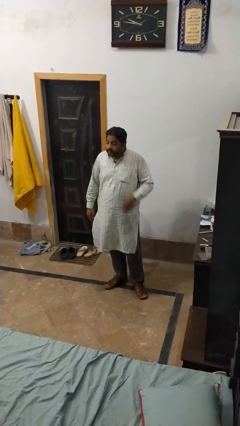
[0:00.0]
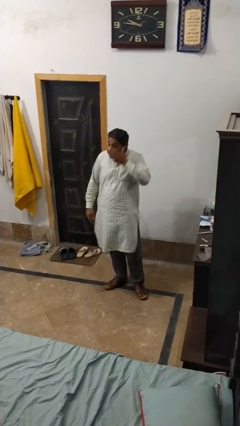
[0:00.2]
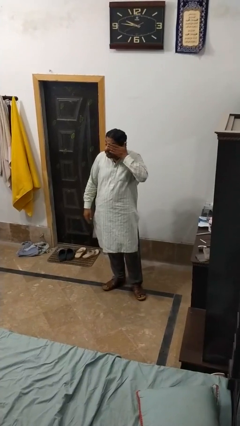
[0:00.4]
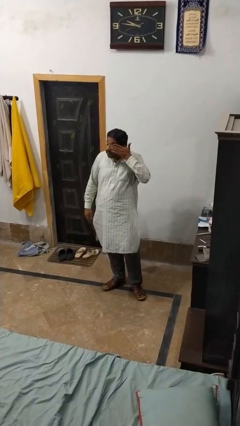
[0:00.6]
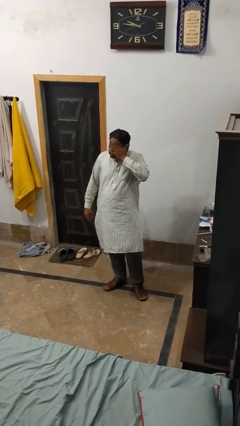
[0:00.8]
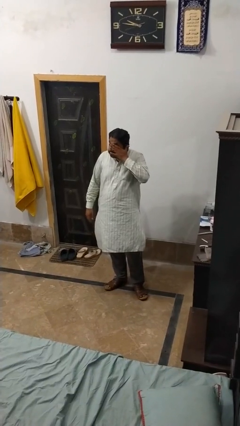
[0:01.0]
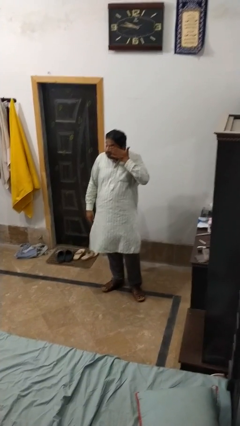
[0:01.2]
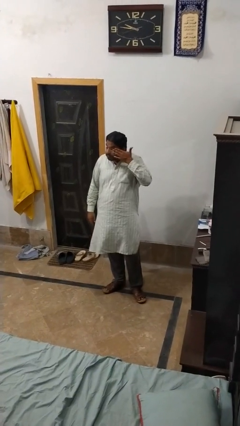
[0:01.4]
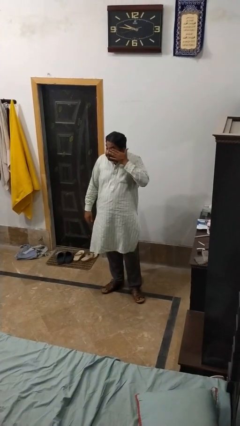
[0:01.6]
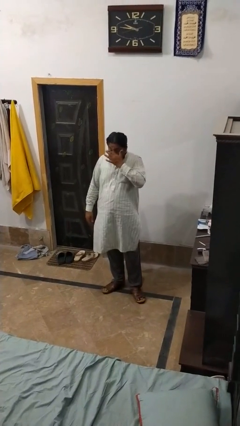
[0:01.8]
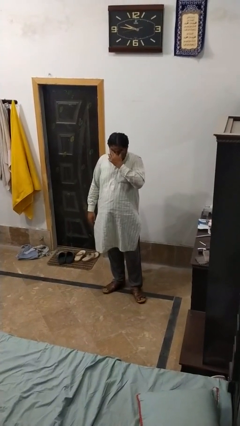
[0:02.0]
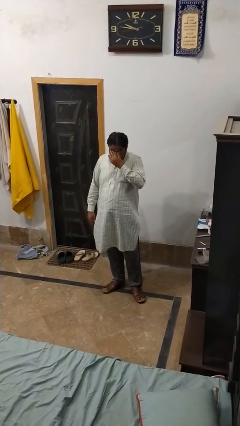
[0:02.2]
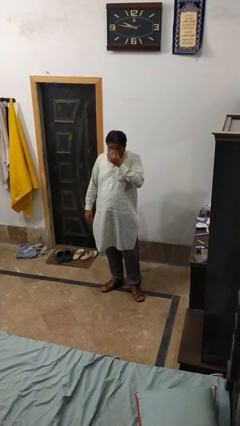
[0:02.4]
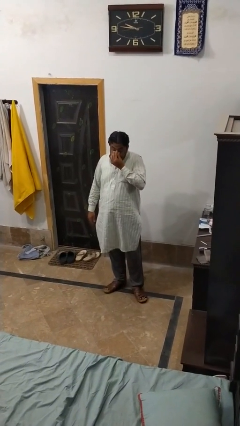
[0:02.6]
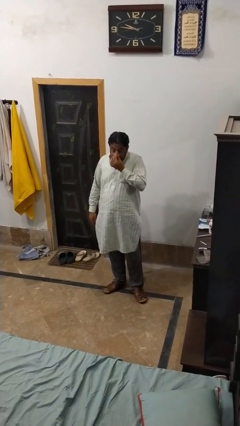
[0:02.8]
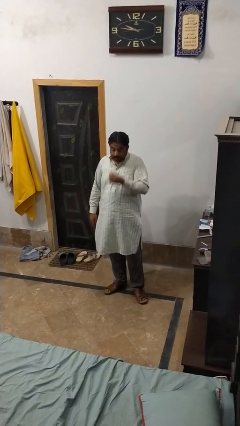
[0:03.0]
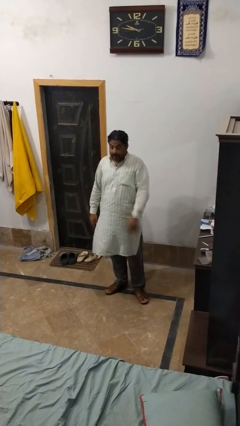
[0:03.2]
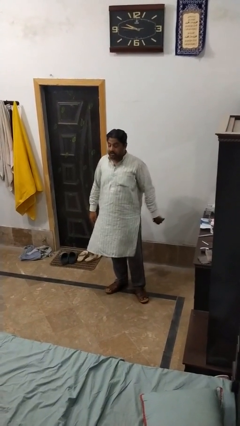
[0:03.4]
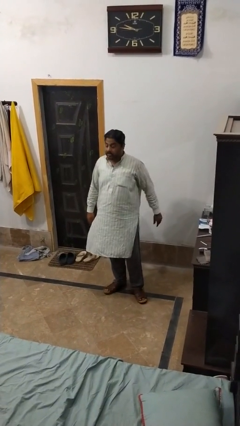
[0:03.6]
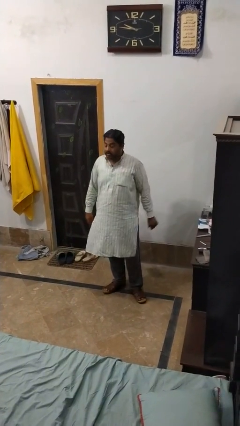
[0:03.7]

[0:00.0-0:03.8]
person rubs eyes

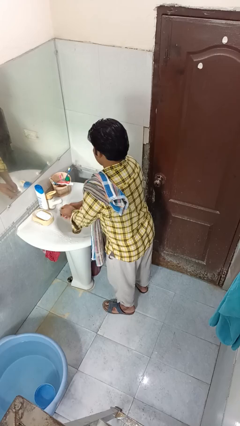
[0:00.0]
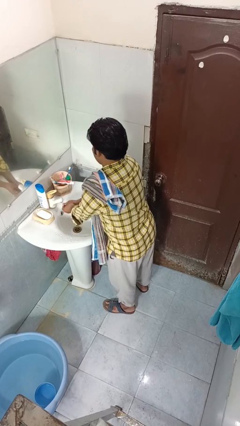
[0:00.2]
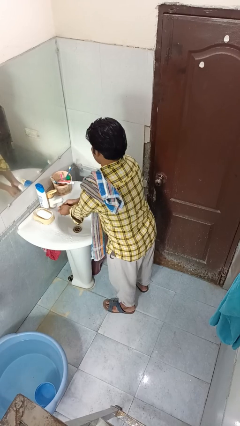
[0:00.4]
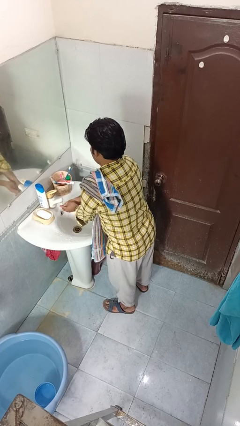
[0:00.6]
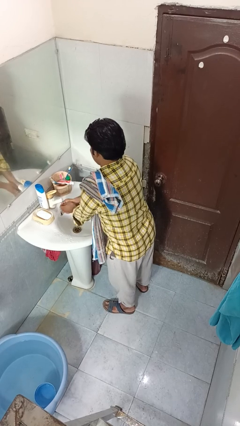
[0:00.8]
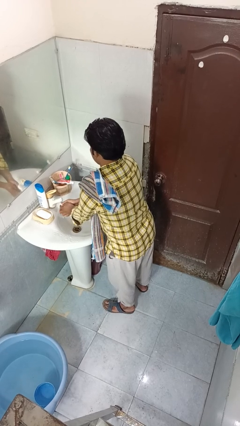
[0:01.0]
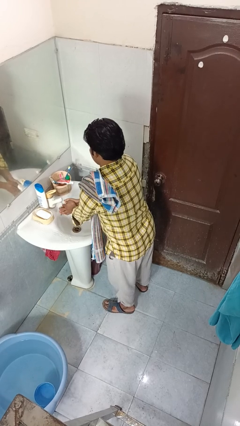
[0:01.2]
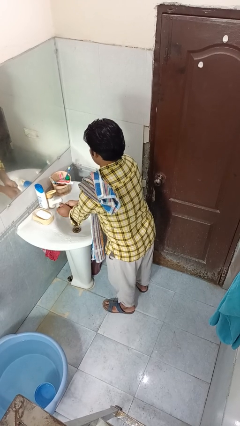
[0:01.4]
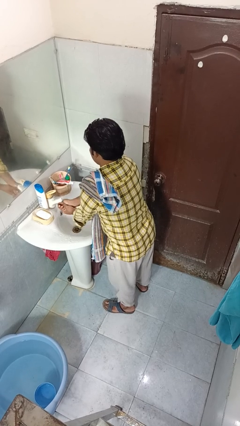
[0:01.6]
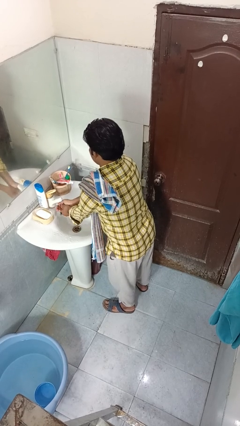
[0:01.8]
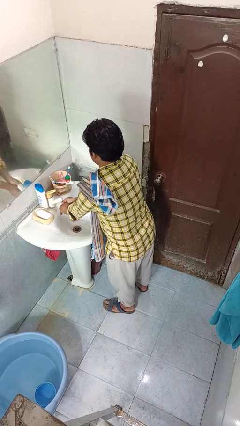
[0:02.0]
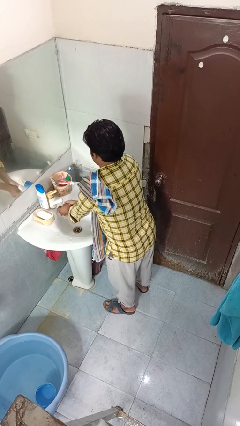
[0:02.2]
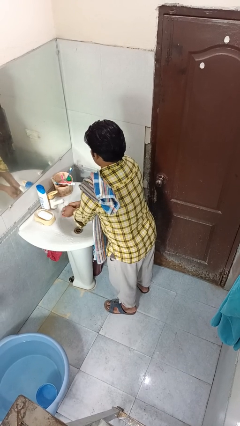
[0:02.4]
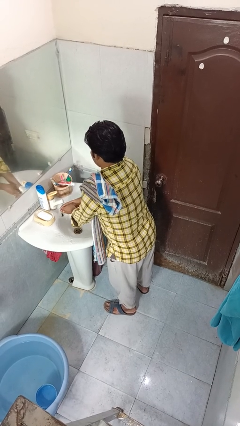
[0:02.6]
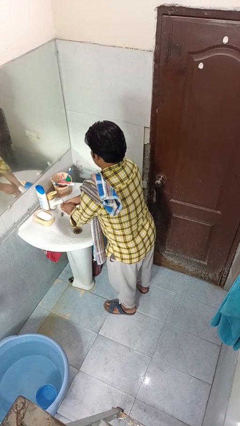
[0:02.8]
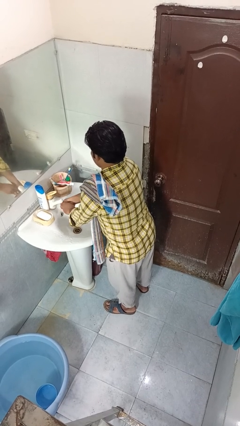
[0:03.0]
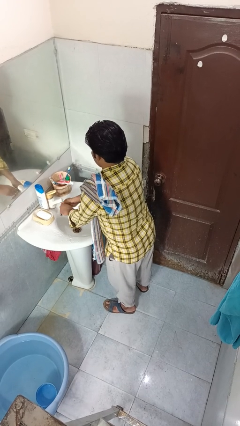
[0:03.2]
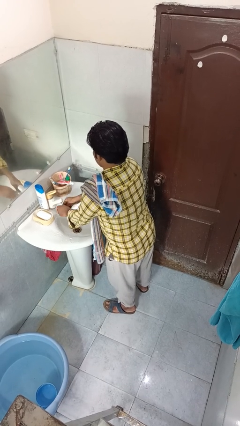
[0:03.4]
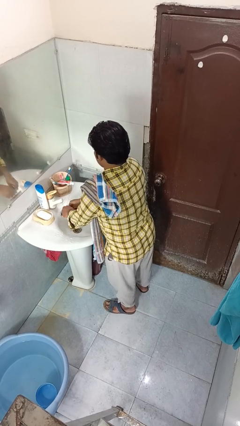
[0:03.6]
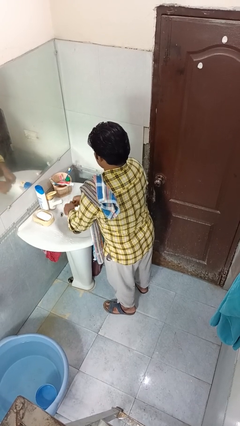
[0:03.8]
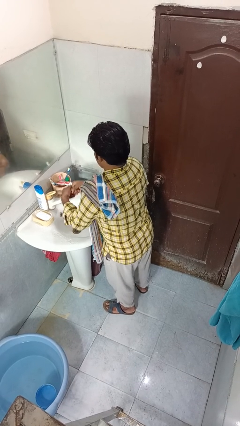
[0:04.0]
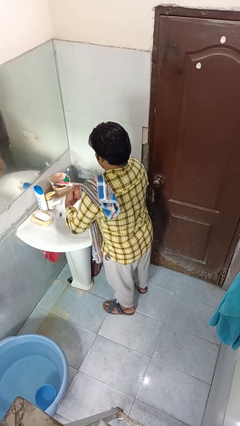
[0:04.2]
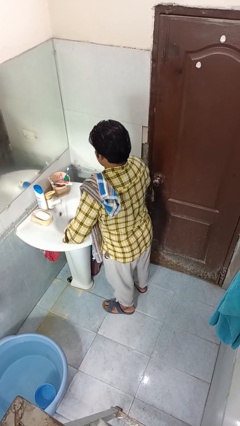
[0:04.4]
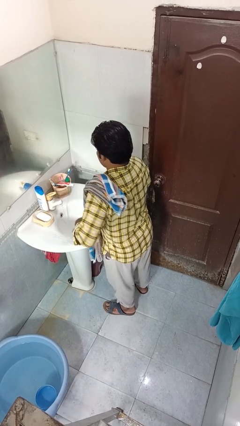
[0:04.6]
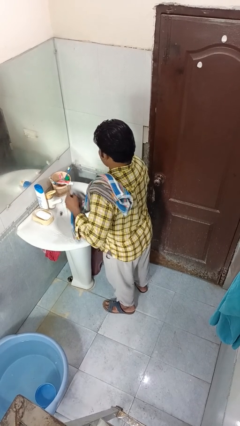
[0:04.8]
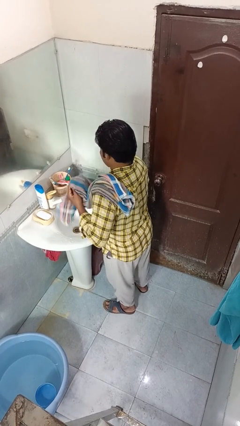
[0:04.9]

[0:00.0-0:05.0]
person washes hands

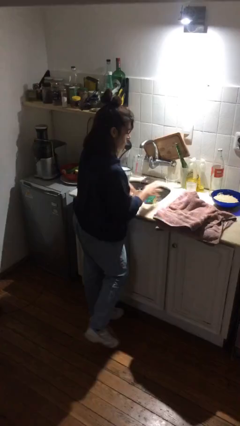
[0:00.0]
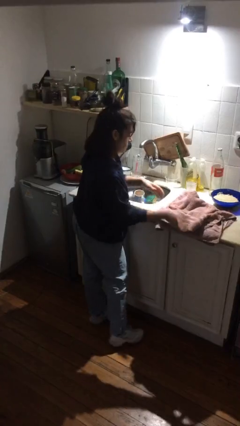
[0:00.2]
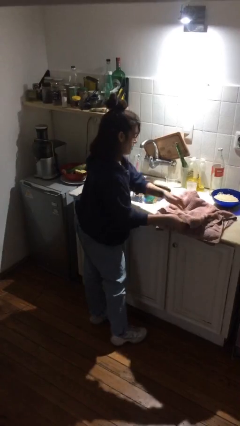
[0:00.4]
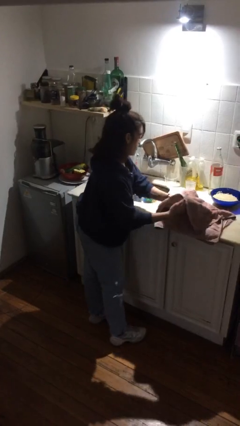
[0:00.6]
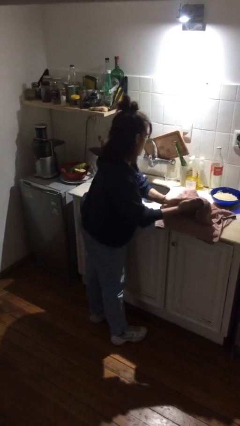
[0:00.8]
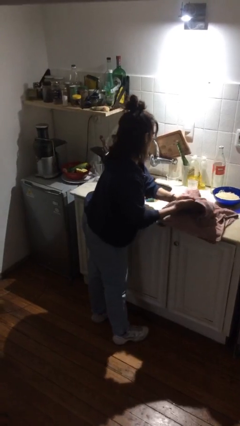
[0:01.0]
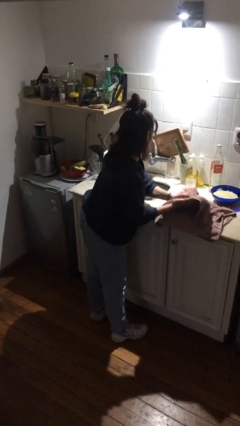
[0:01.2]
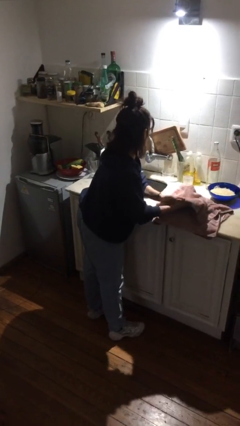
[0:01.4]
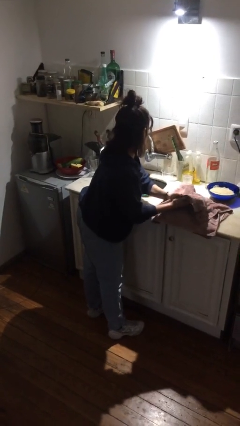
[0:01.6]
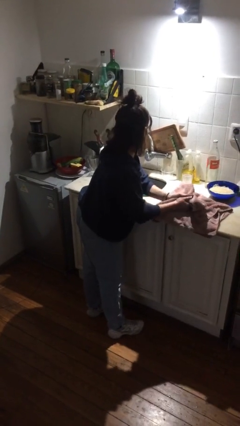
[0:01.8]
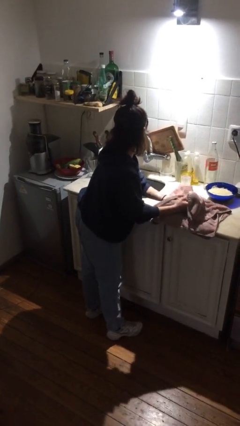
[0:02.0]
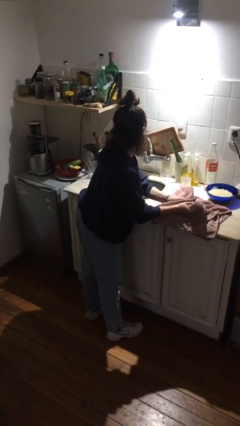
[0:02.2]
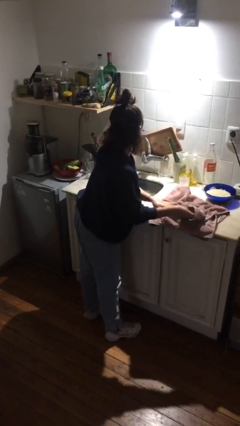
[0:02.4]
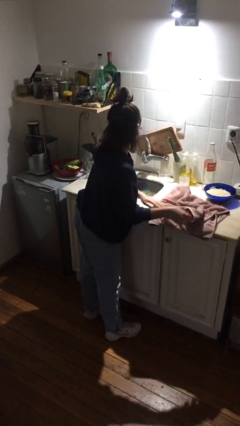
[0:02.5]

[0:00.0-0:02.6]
person dries hands with towel

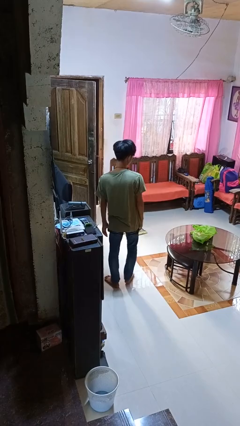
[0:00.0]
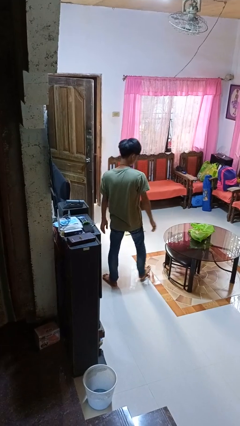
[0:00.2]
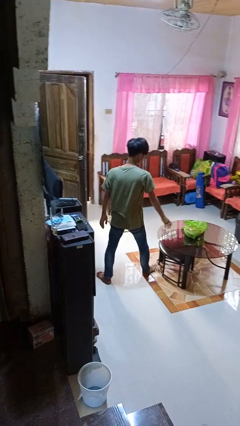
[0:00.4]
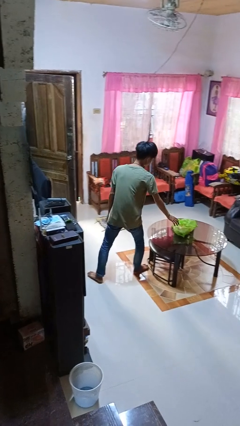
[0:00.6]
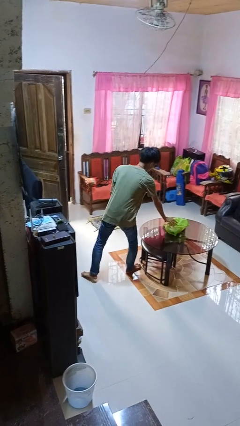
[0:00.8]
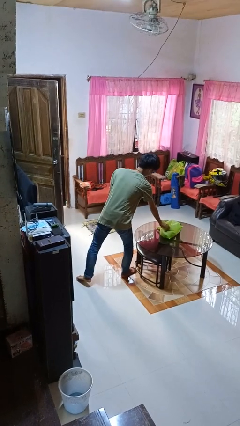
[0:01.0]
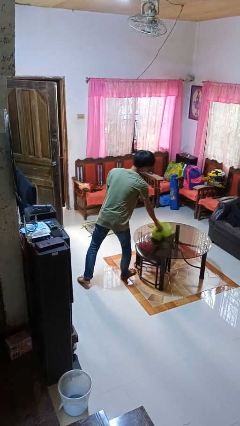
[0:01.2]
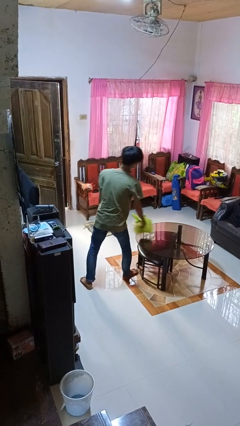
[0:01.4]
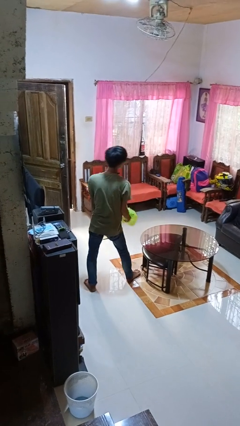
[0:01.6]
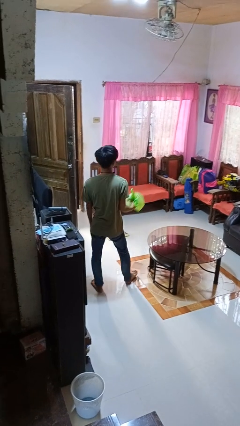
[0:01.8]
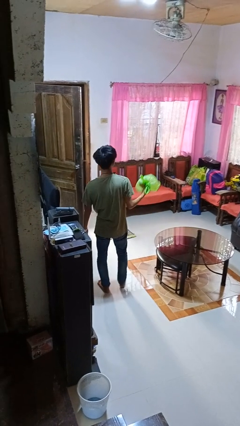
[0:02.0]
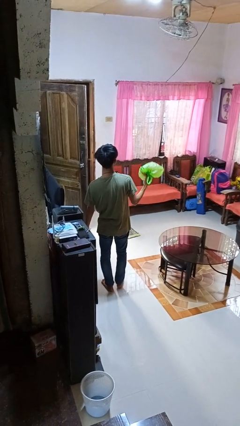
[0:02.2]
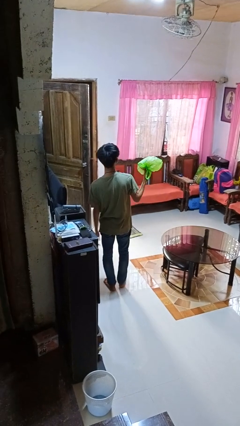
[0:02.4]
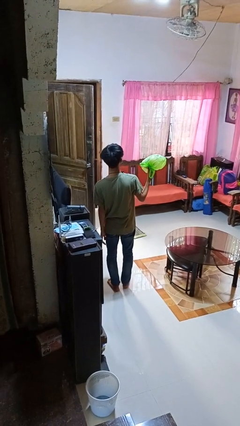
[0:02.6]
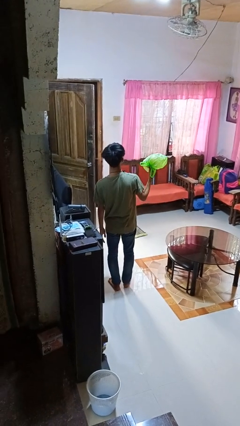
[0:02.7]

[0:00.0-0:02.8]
person picks up object from table

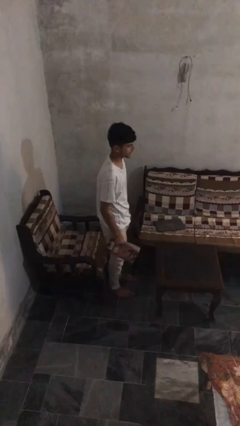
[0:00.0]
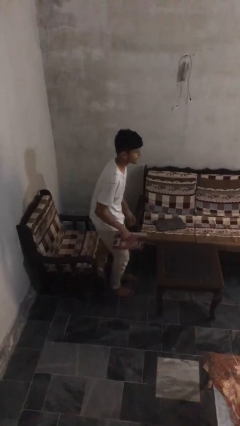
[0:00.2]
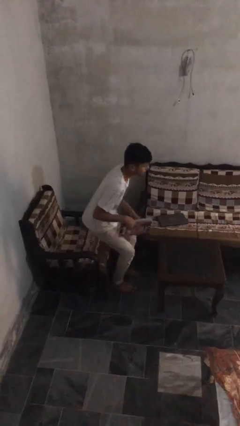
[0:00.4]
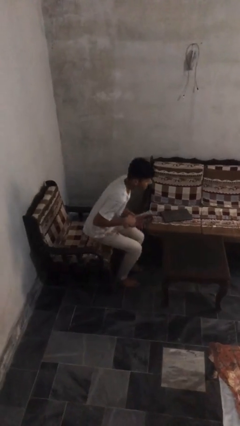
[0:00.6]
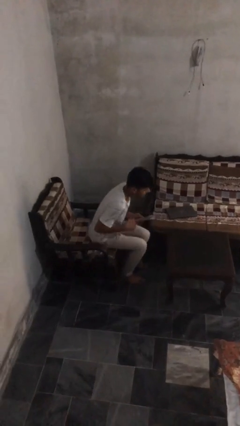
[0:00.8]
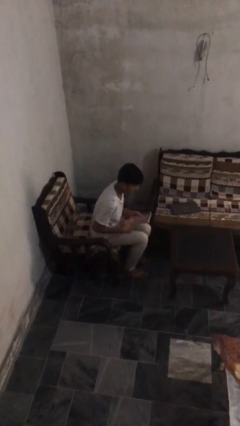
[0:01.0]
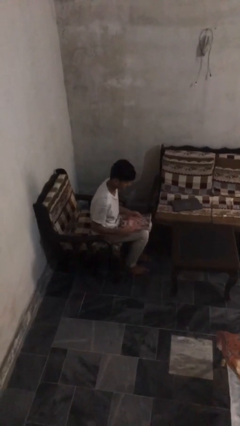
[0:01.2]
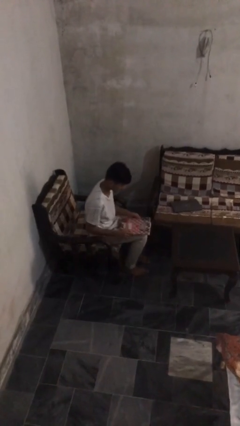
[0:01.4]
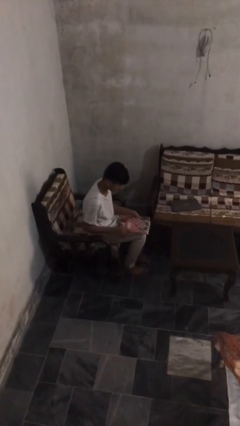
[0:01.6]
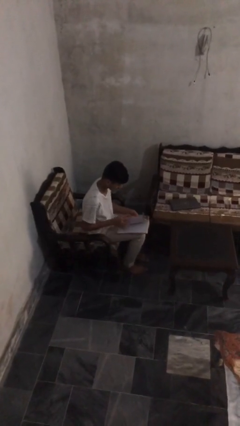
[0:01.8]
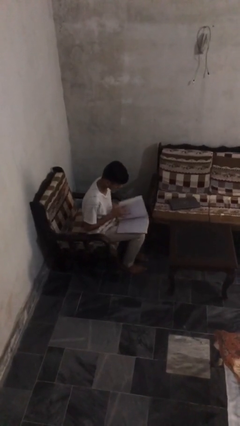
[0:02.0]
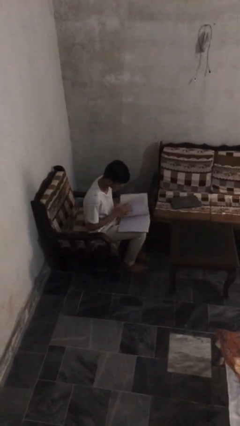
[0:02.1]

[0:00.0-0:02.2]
person sits down

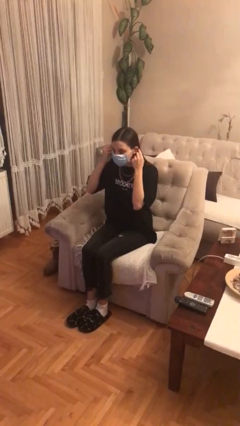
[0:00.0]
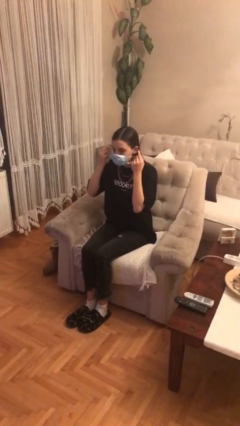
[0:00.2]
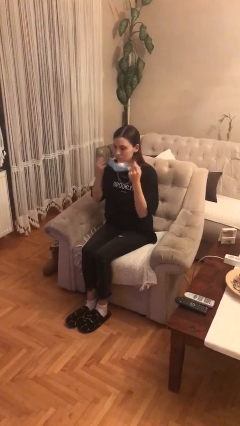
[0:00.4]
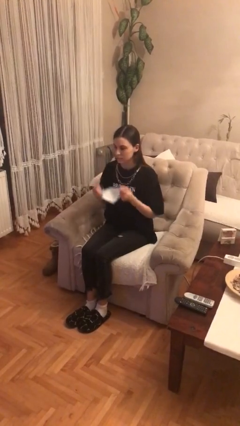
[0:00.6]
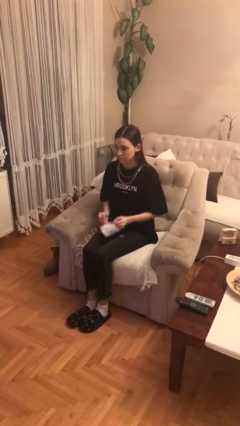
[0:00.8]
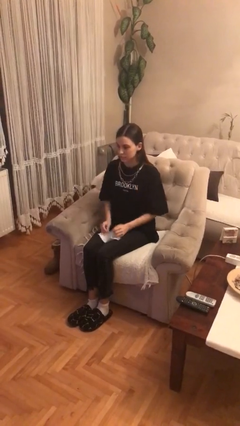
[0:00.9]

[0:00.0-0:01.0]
person takes off facemask

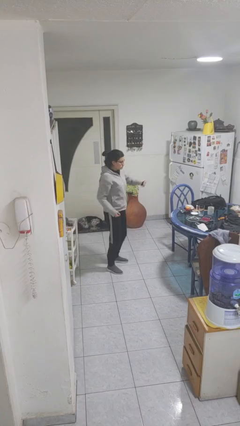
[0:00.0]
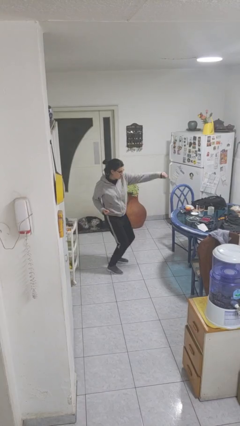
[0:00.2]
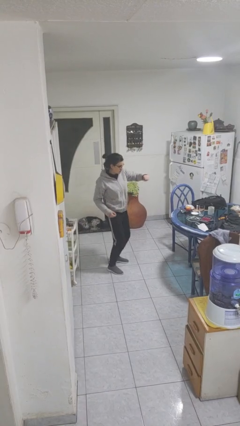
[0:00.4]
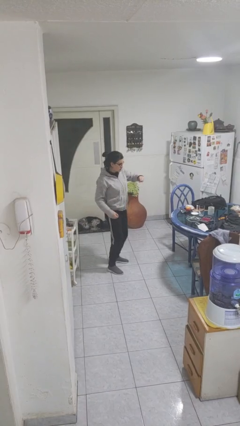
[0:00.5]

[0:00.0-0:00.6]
person punches
